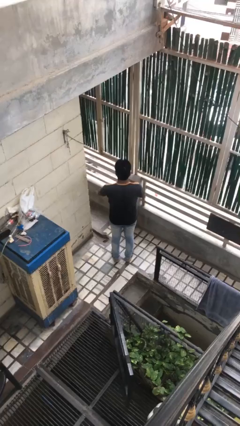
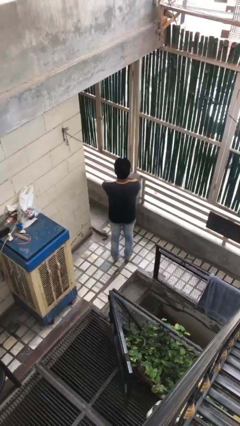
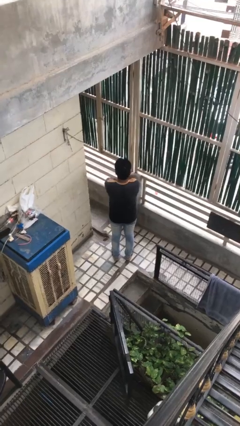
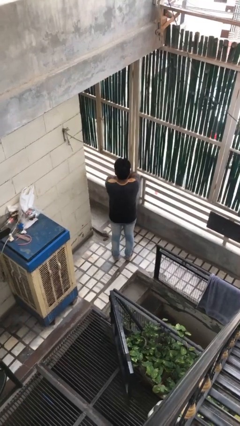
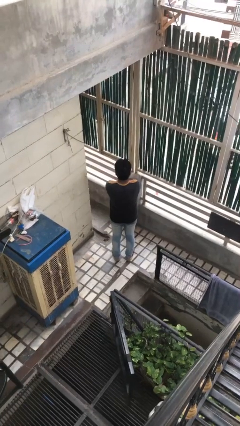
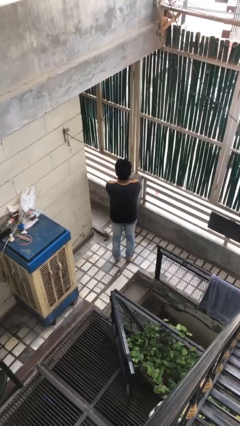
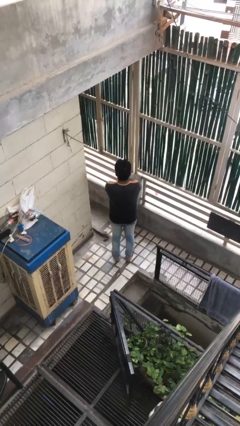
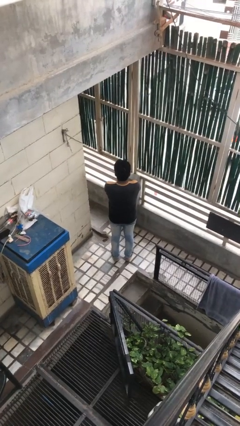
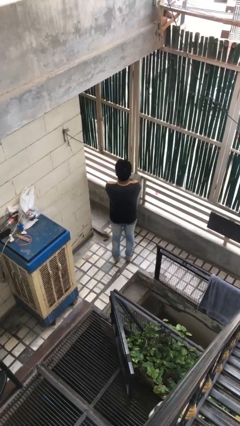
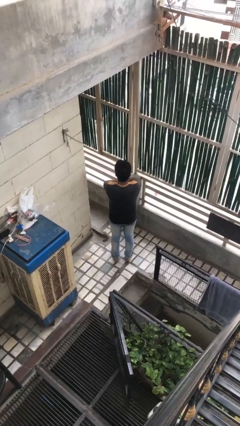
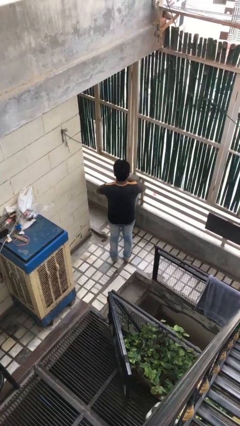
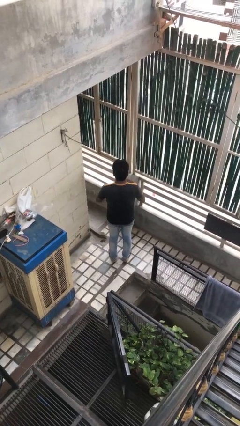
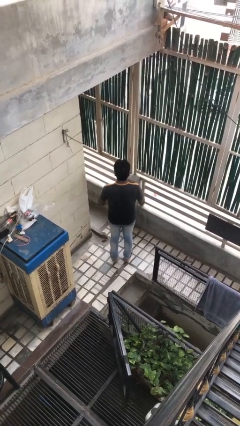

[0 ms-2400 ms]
person crosses arms

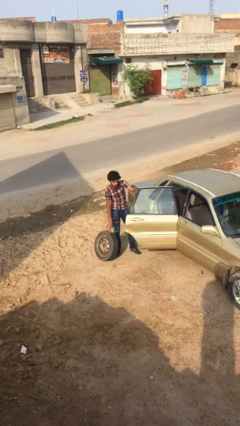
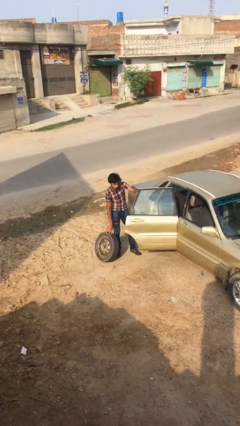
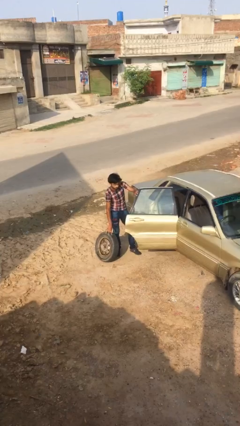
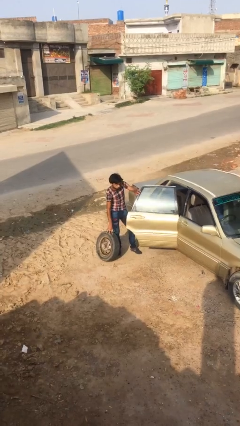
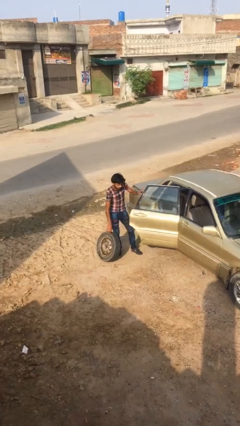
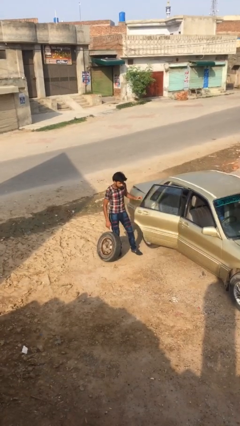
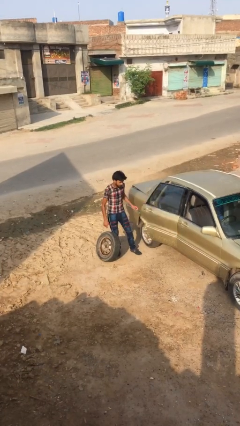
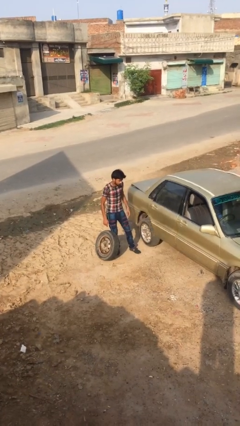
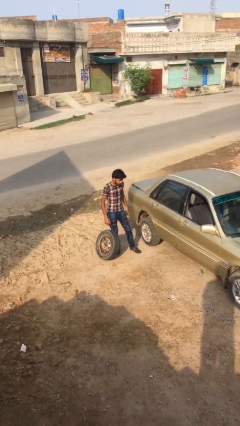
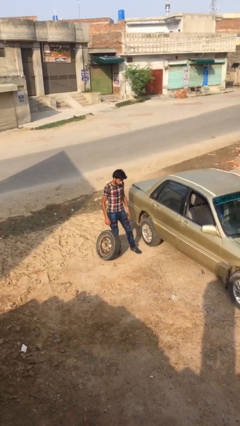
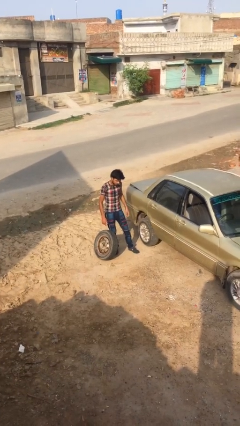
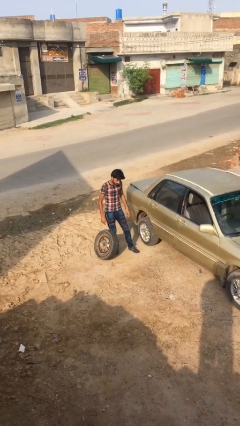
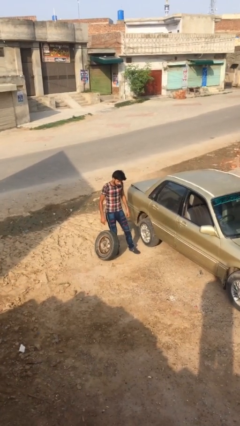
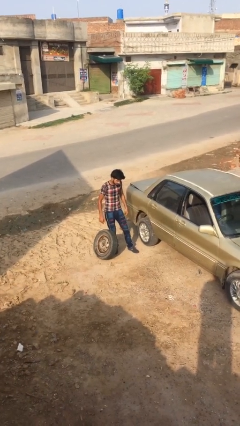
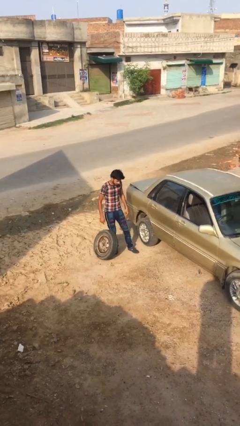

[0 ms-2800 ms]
person closes car door

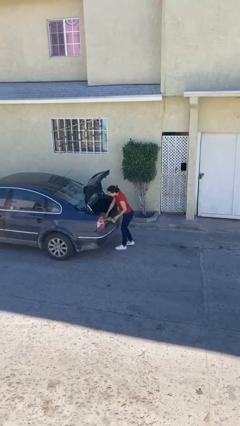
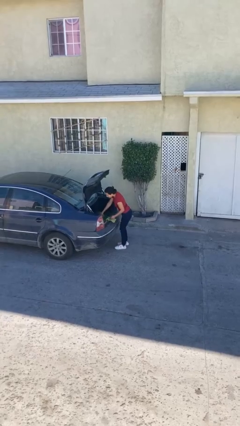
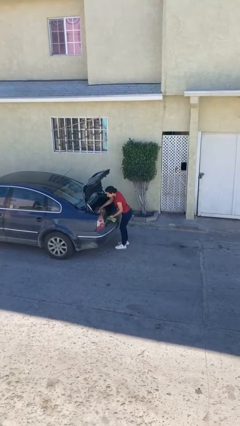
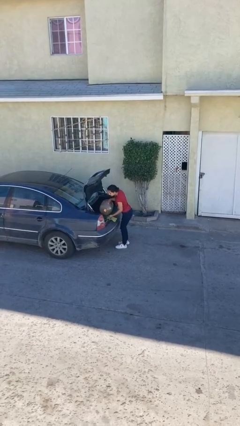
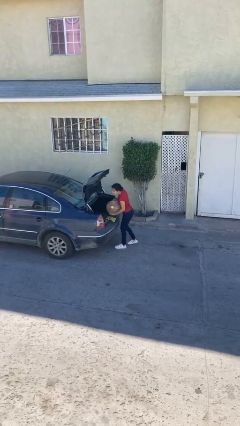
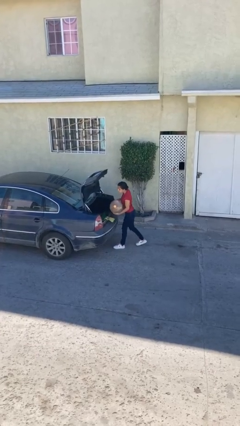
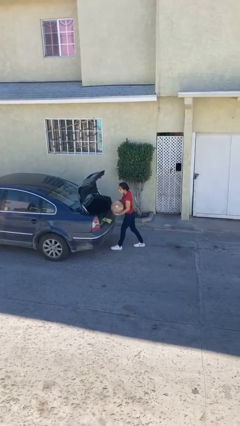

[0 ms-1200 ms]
person unloads car

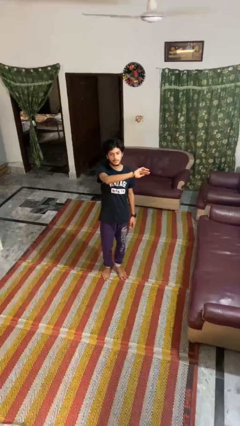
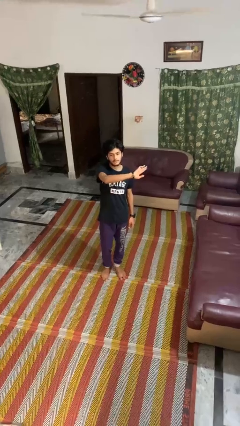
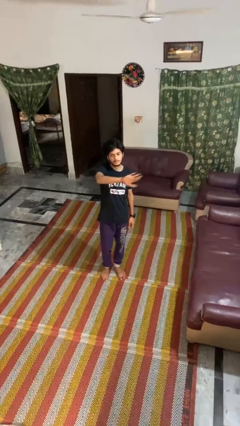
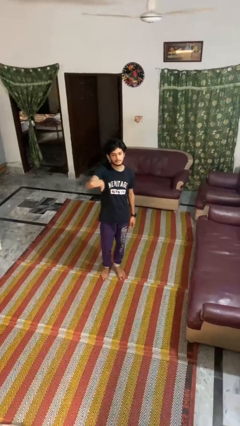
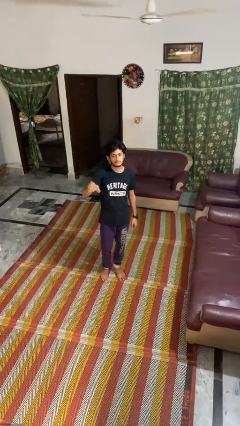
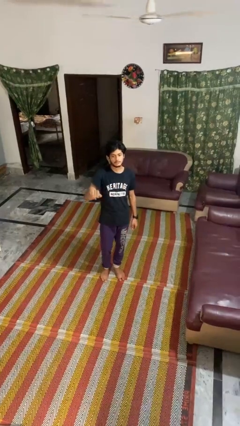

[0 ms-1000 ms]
person gestures swipe right

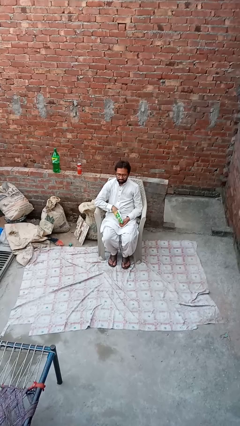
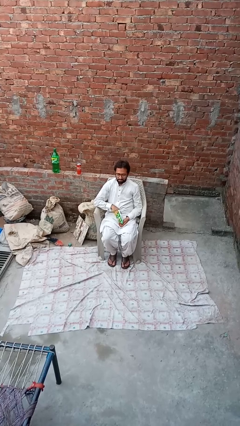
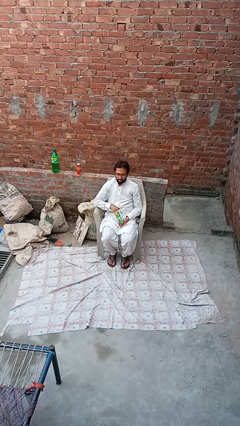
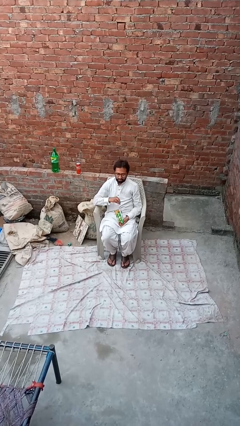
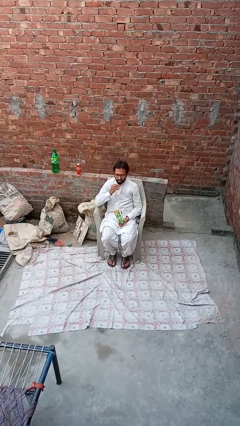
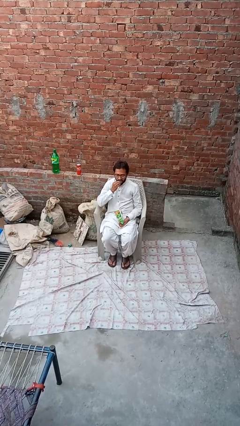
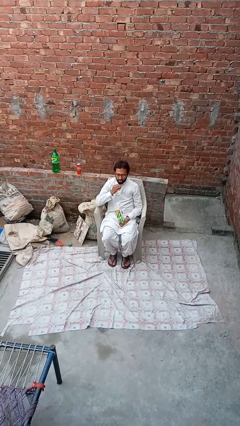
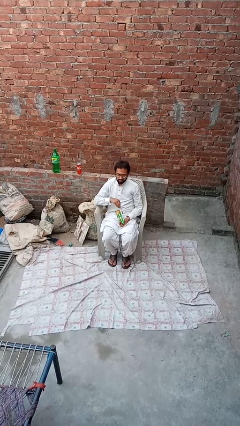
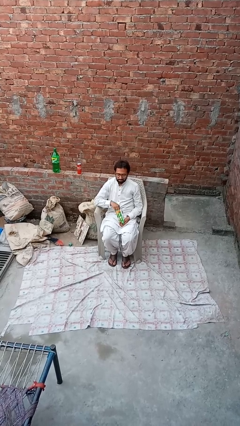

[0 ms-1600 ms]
person eats snack from bag

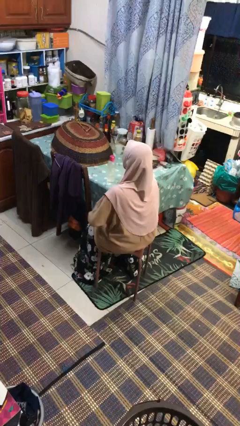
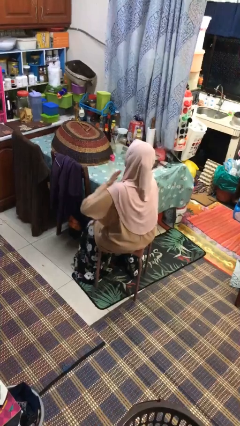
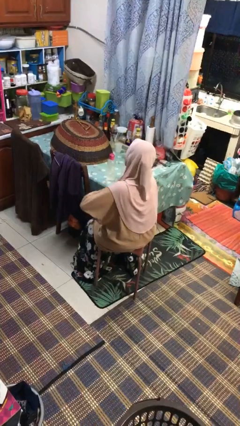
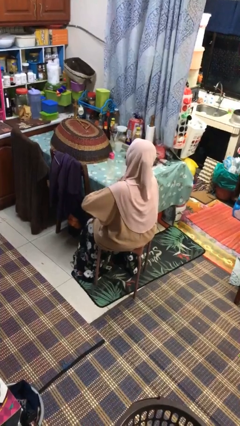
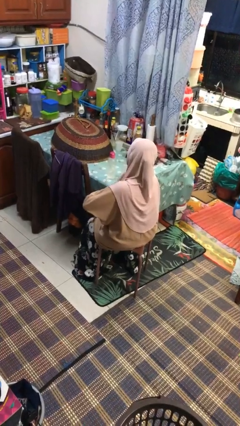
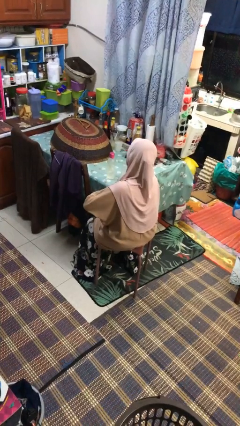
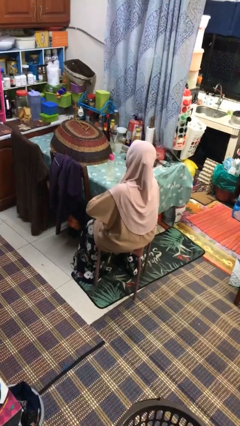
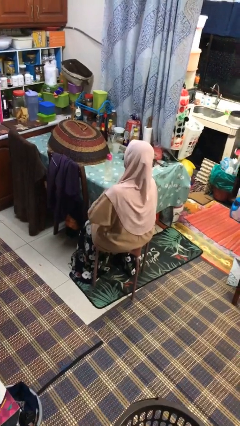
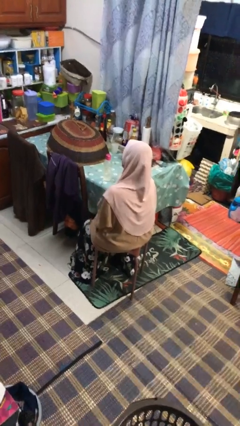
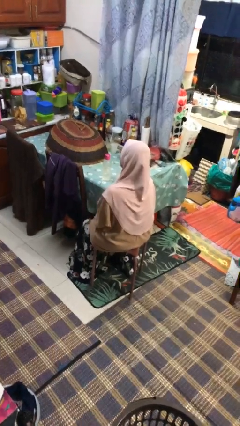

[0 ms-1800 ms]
person drums on chest

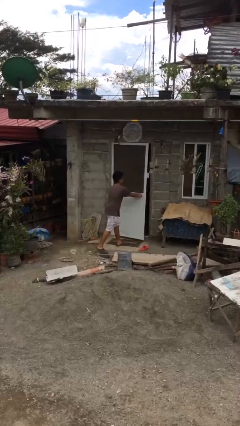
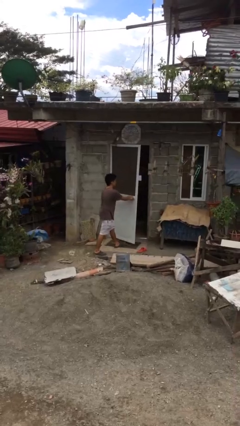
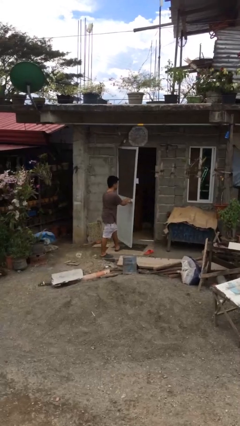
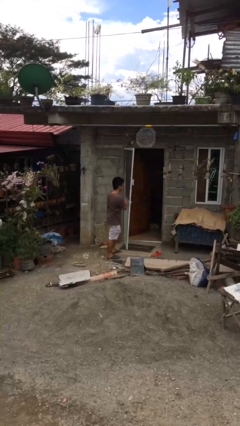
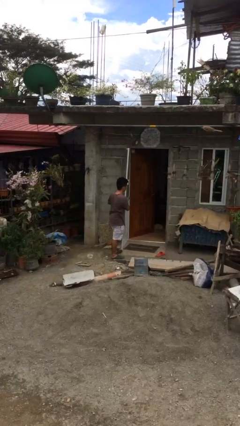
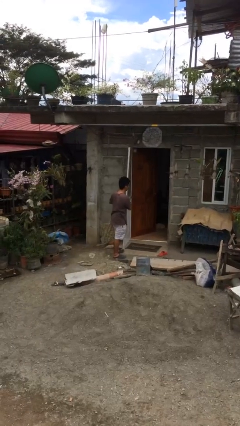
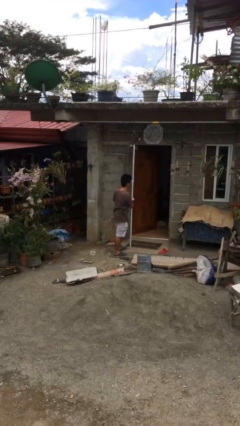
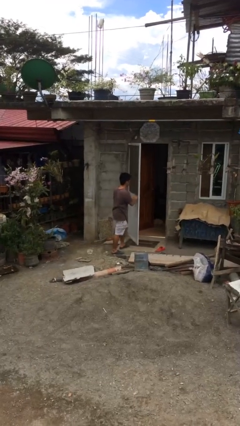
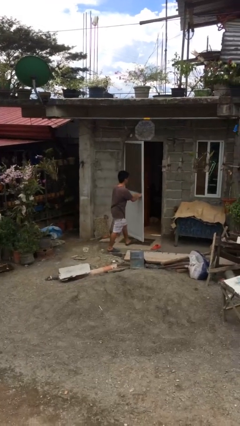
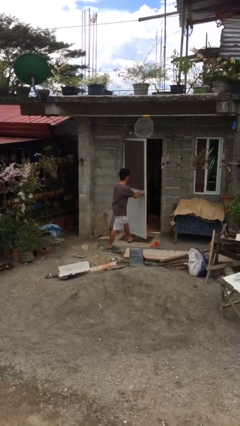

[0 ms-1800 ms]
person opens facility door

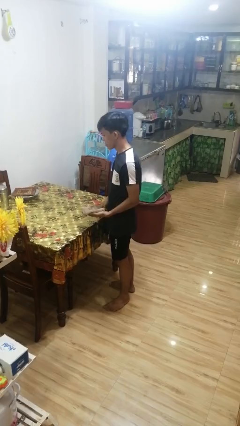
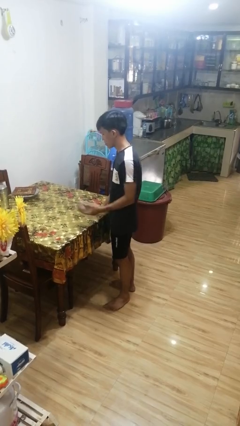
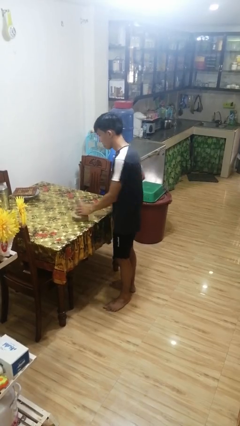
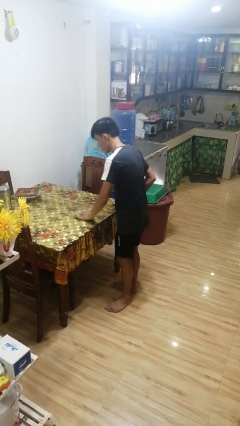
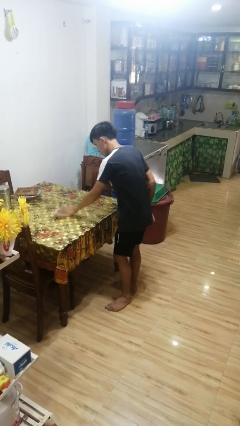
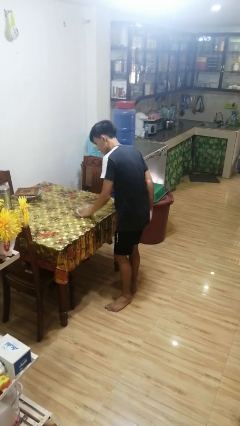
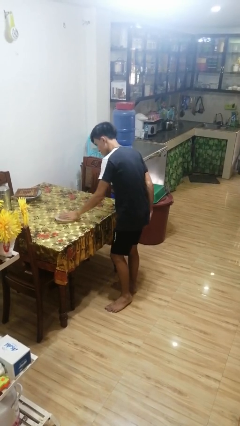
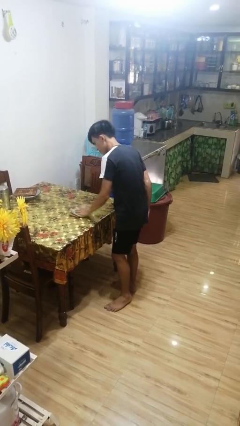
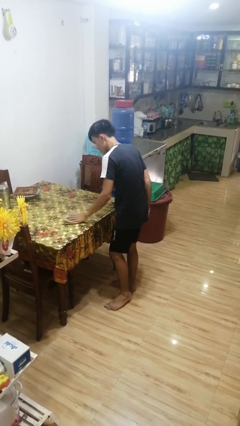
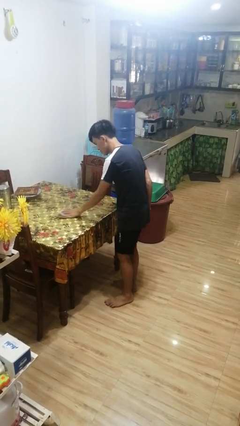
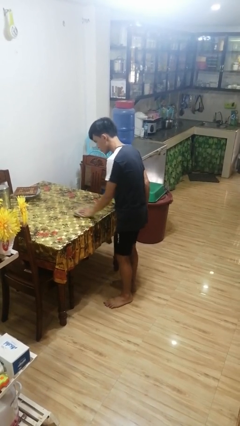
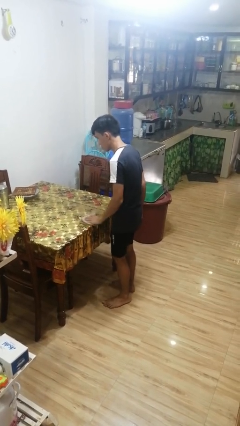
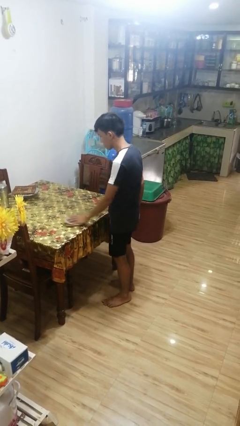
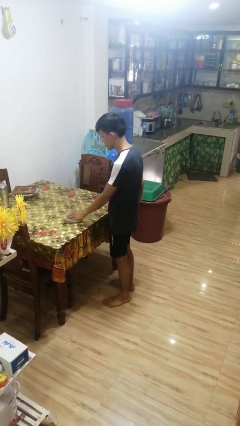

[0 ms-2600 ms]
person cleans table with rag

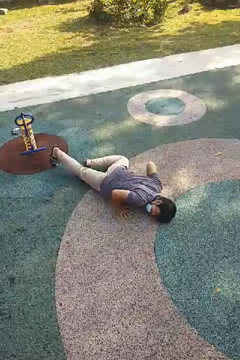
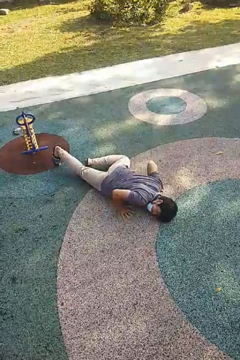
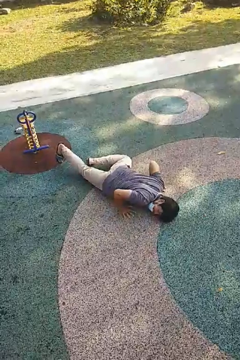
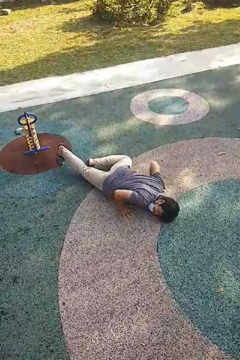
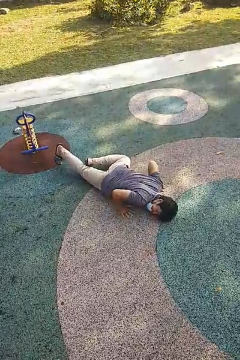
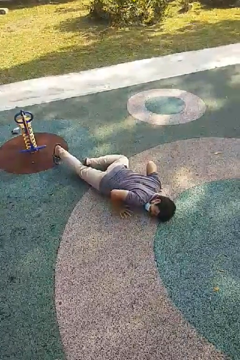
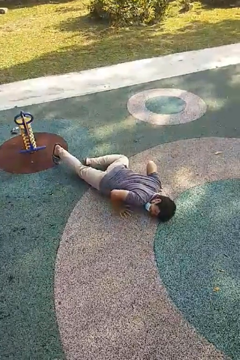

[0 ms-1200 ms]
person lies down on floor
